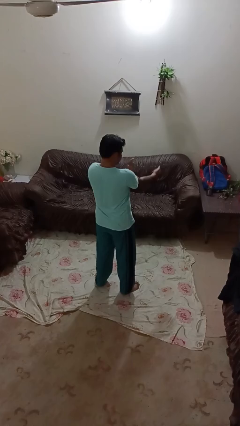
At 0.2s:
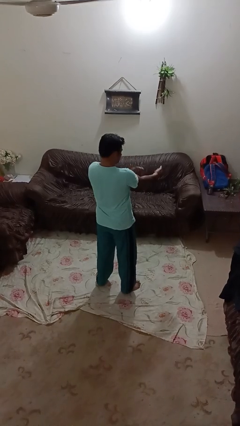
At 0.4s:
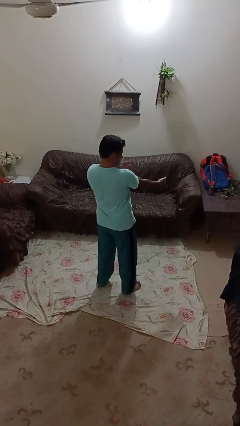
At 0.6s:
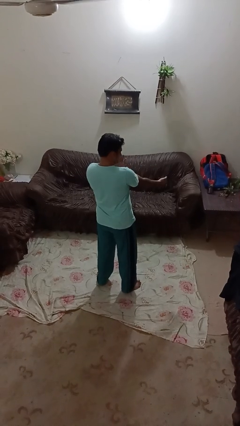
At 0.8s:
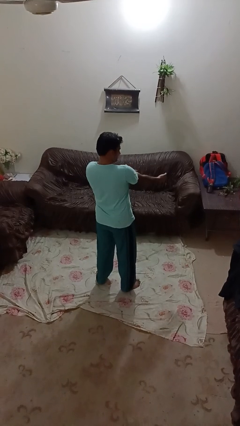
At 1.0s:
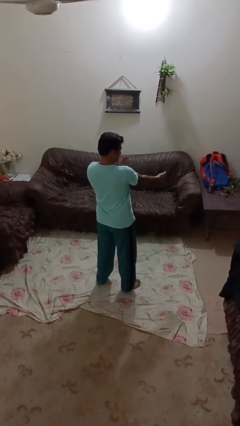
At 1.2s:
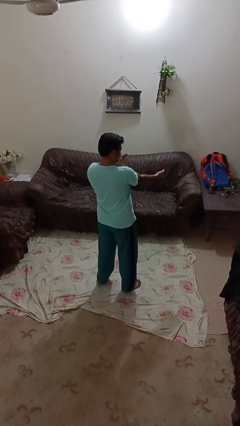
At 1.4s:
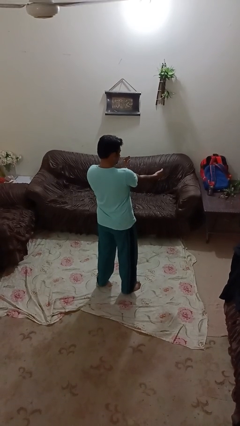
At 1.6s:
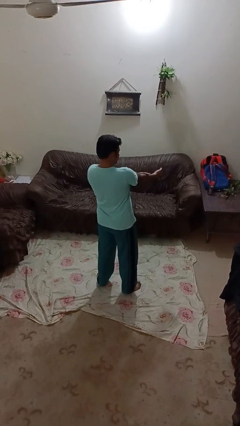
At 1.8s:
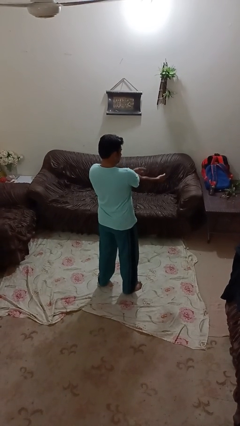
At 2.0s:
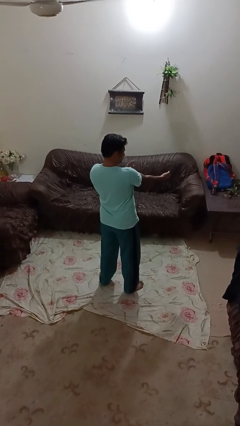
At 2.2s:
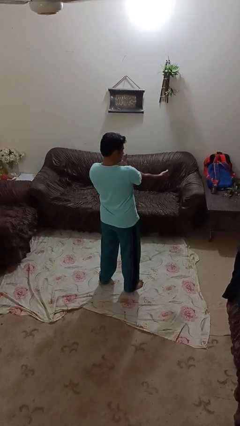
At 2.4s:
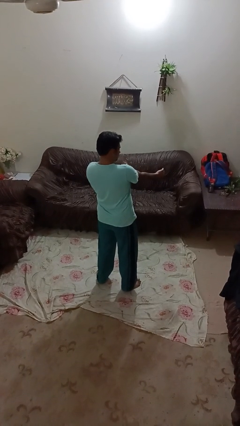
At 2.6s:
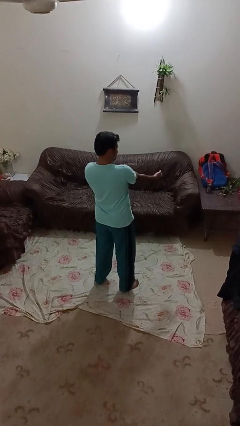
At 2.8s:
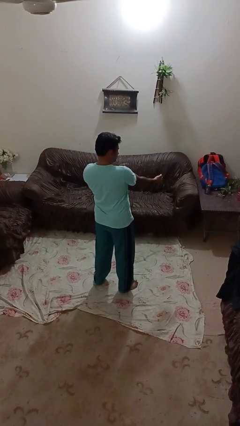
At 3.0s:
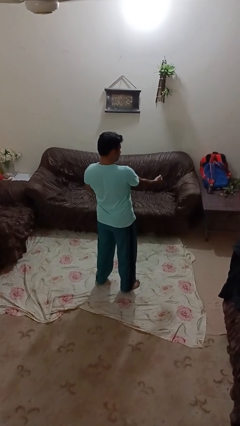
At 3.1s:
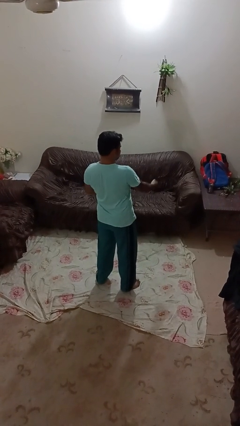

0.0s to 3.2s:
person swats bug

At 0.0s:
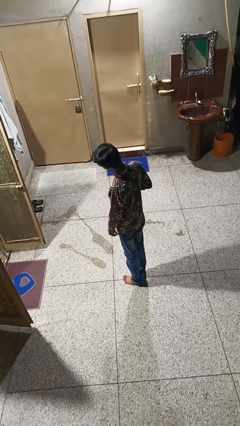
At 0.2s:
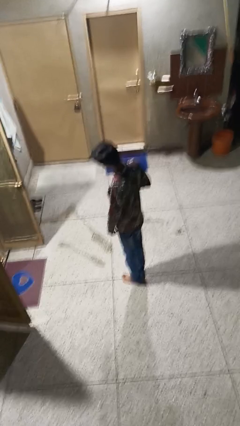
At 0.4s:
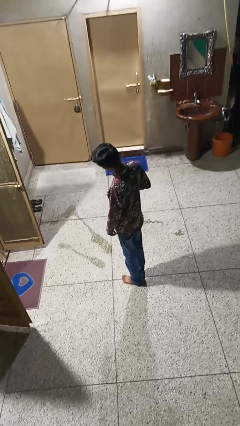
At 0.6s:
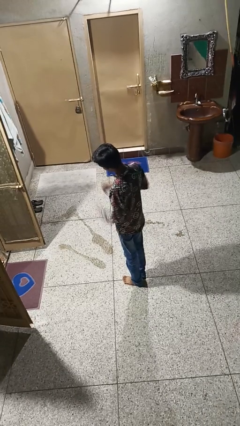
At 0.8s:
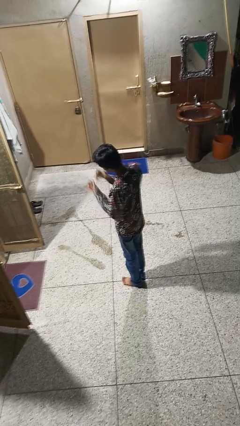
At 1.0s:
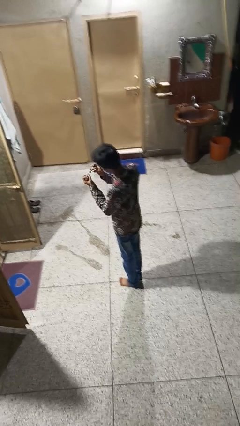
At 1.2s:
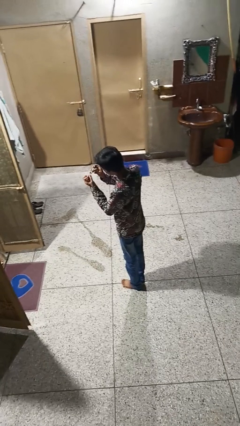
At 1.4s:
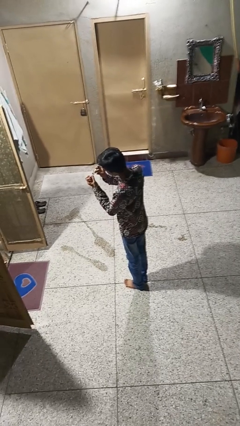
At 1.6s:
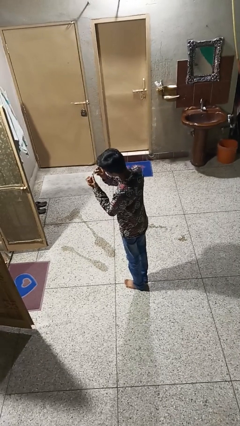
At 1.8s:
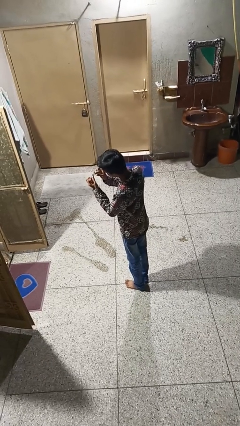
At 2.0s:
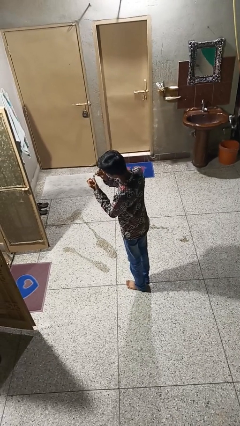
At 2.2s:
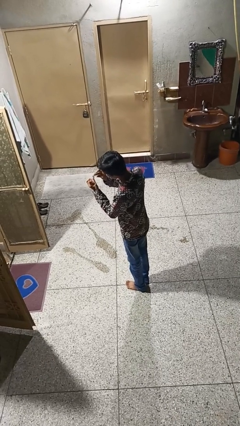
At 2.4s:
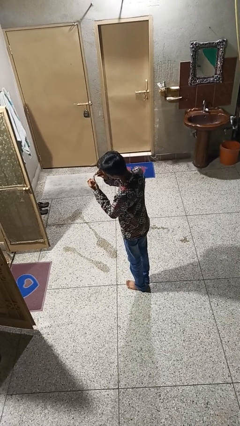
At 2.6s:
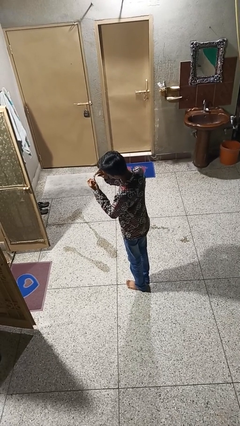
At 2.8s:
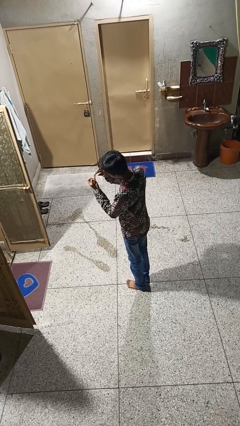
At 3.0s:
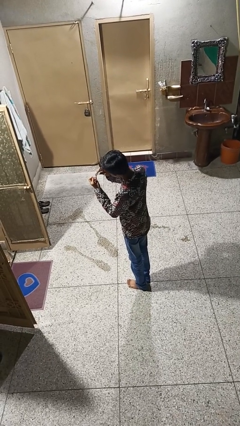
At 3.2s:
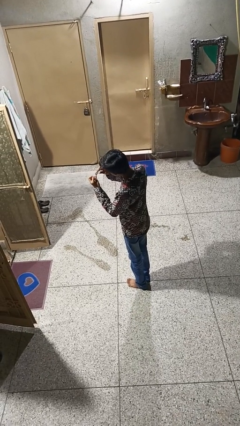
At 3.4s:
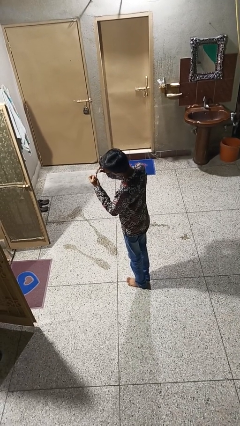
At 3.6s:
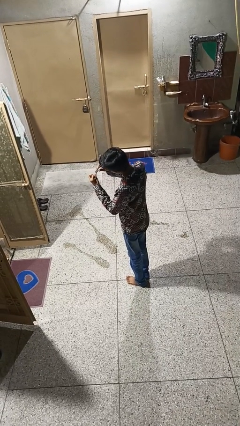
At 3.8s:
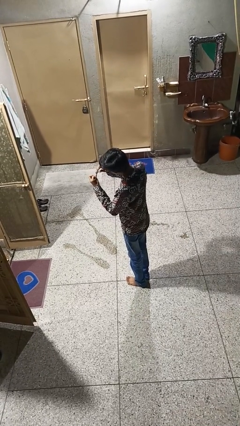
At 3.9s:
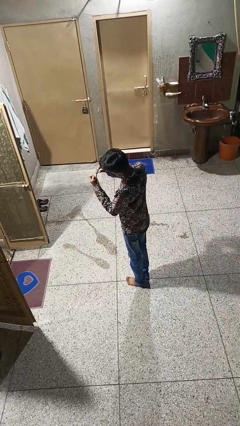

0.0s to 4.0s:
person clips fingernails

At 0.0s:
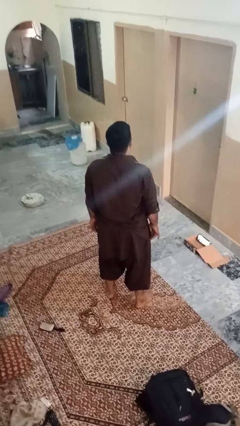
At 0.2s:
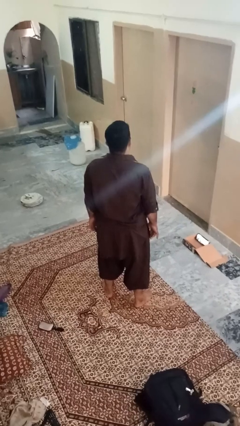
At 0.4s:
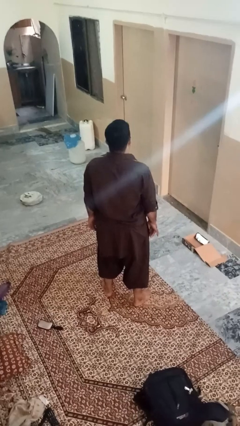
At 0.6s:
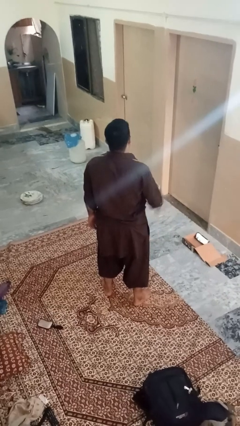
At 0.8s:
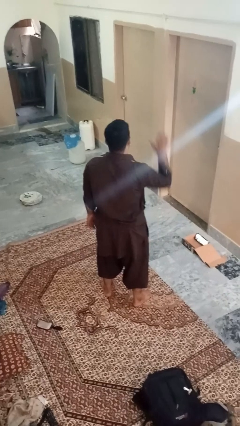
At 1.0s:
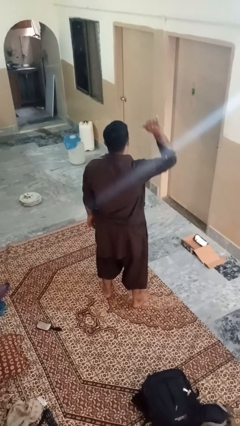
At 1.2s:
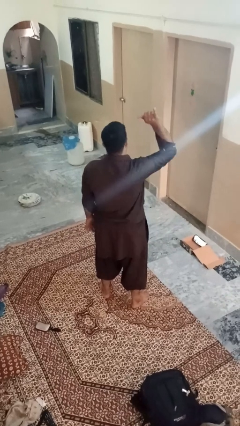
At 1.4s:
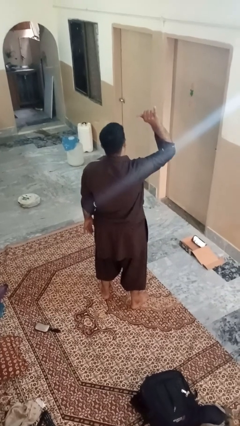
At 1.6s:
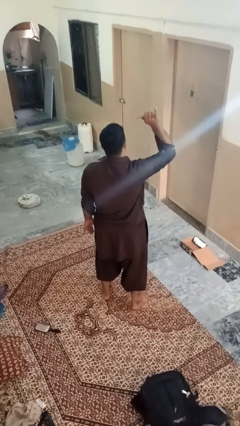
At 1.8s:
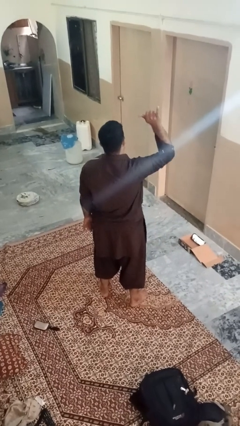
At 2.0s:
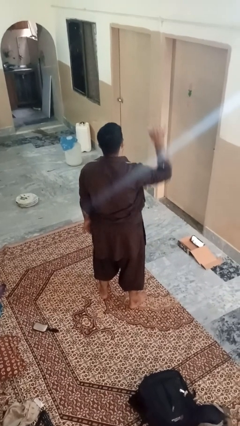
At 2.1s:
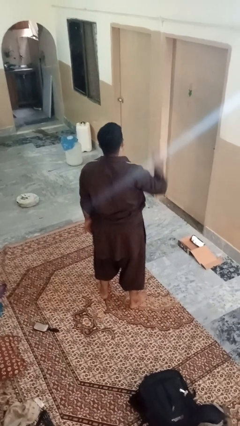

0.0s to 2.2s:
person gestures hang loose

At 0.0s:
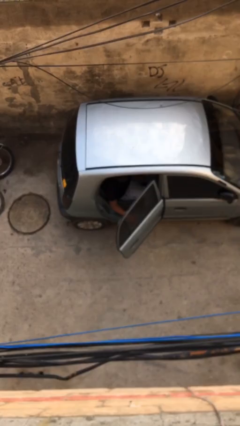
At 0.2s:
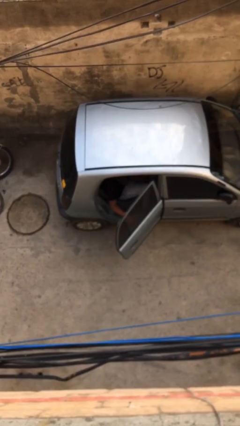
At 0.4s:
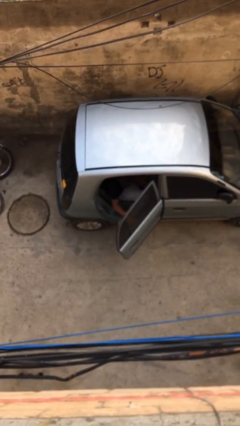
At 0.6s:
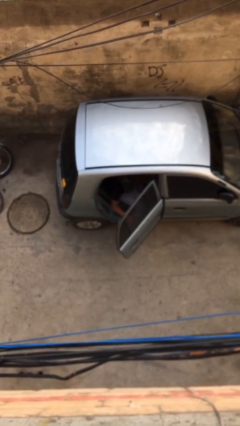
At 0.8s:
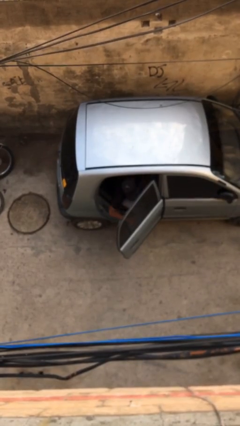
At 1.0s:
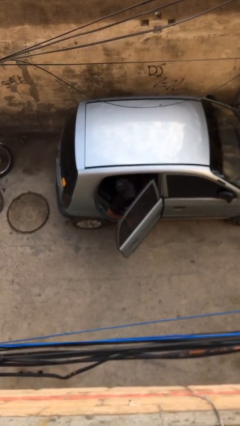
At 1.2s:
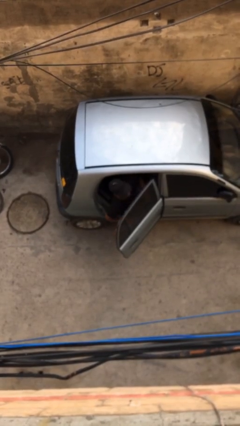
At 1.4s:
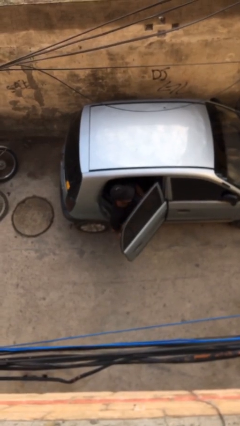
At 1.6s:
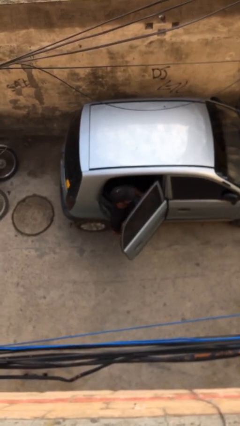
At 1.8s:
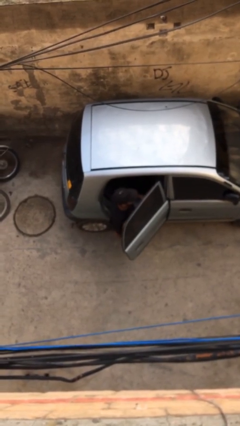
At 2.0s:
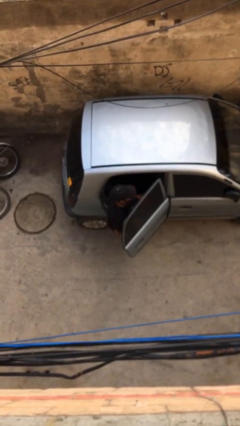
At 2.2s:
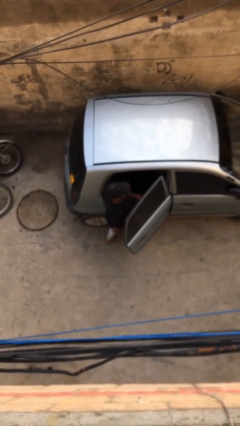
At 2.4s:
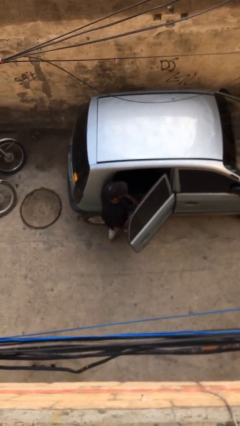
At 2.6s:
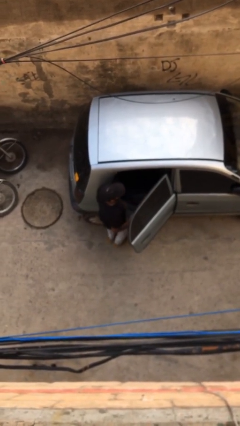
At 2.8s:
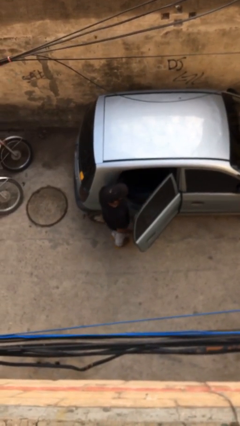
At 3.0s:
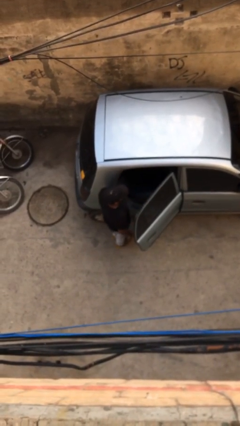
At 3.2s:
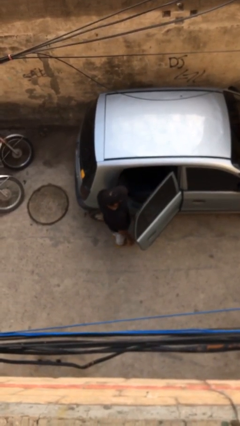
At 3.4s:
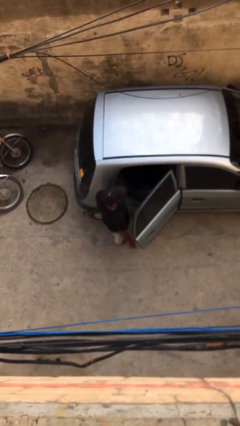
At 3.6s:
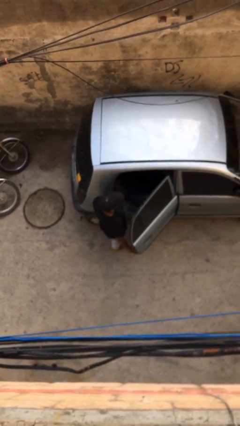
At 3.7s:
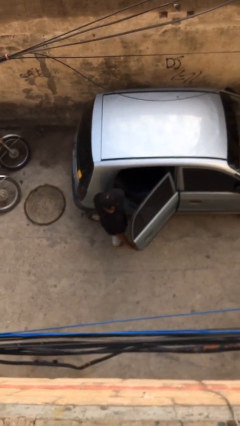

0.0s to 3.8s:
person exits car

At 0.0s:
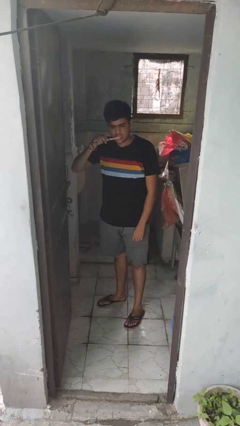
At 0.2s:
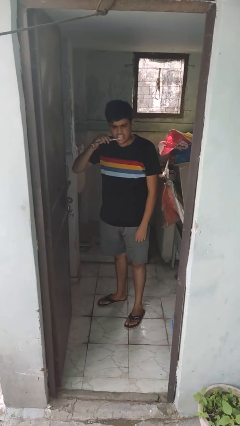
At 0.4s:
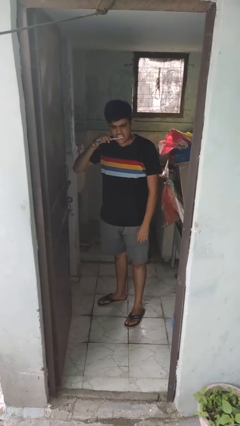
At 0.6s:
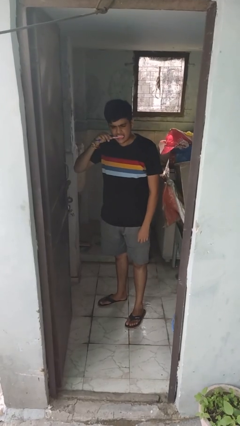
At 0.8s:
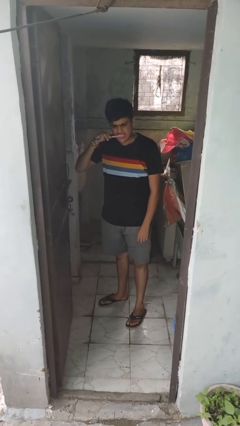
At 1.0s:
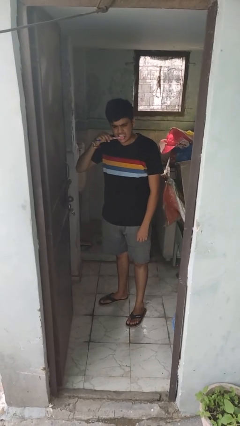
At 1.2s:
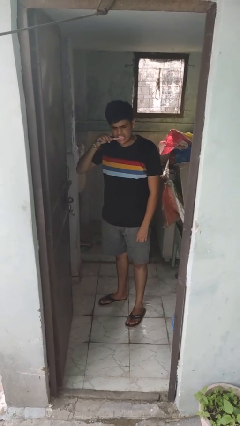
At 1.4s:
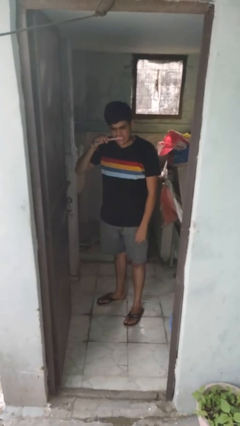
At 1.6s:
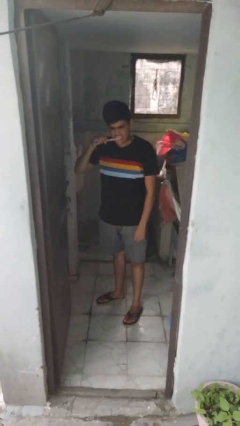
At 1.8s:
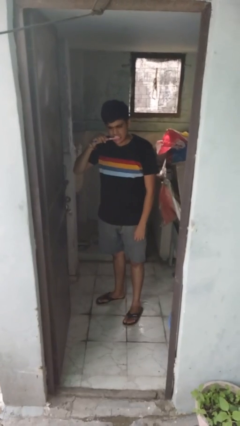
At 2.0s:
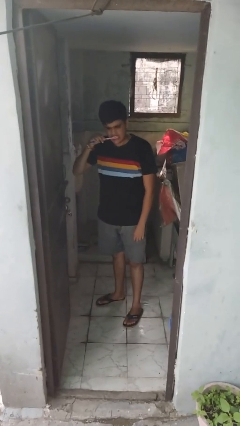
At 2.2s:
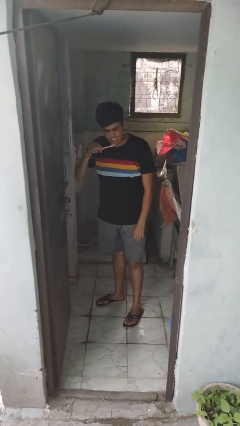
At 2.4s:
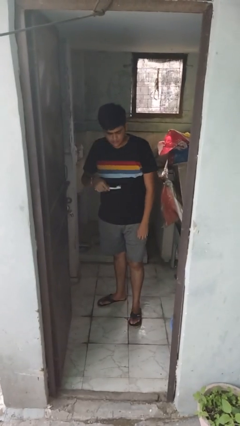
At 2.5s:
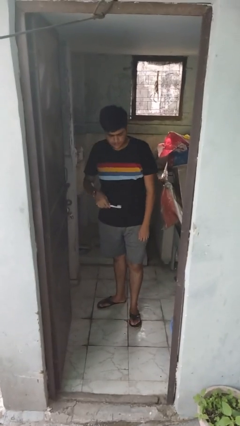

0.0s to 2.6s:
person brushes teeth

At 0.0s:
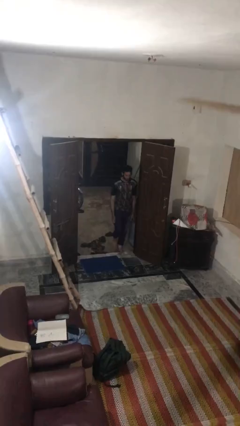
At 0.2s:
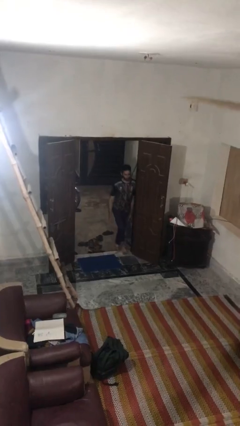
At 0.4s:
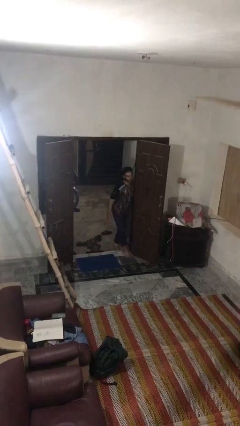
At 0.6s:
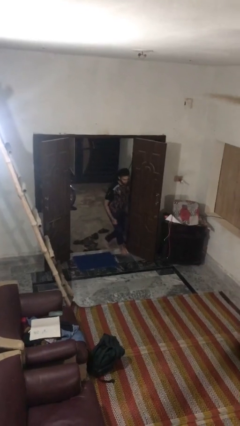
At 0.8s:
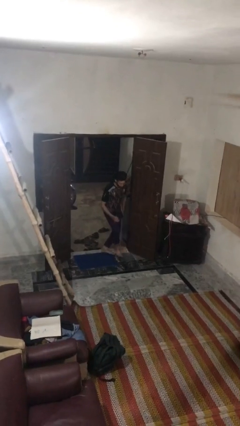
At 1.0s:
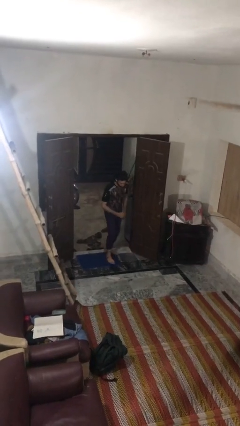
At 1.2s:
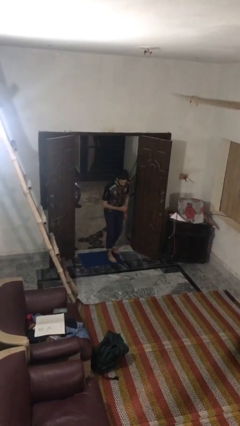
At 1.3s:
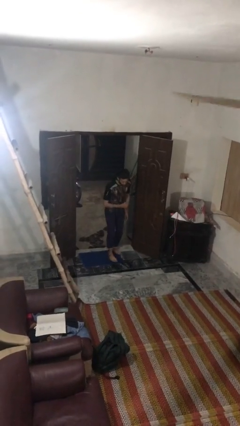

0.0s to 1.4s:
person bumps into wall
